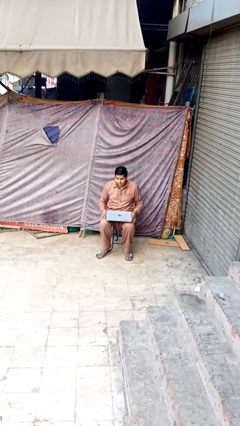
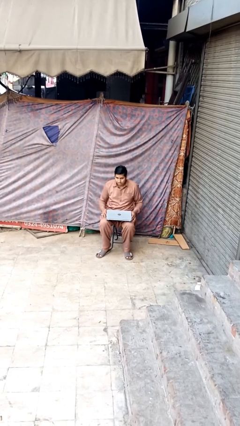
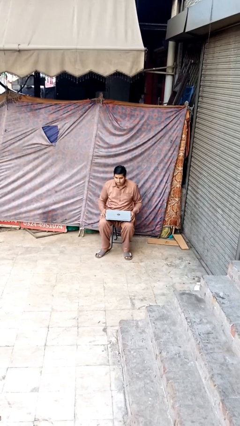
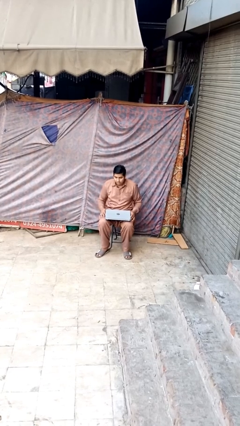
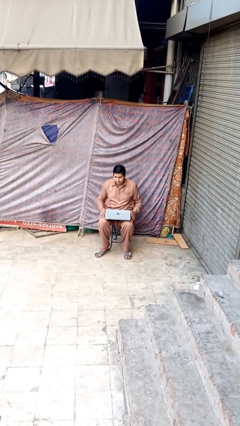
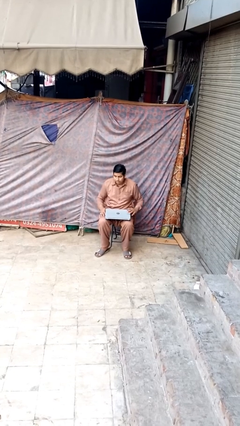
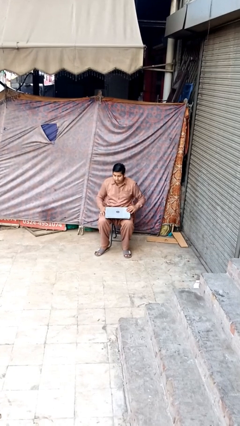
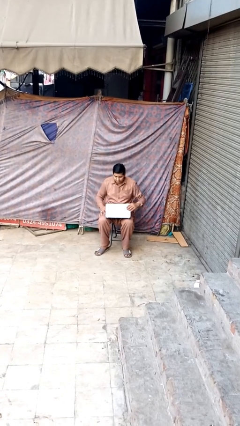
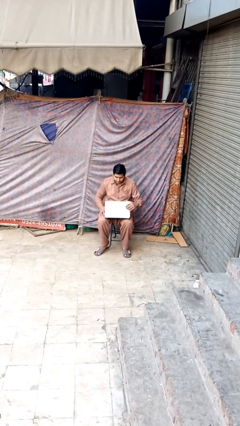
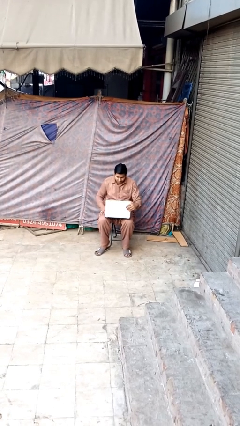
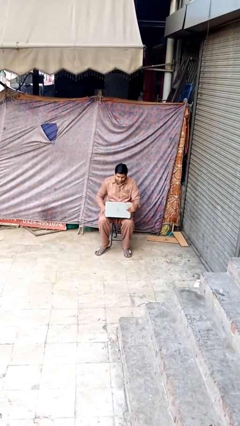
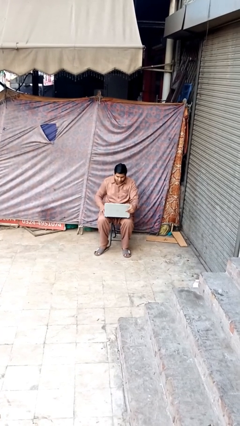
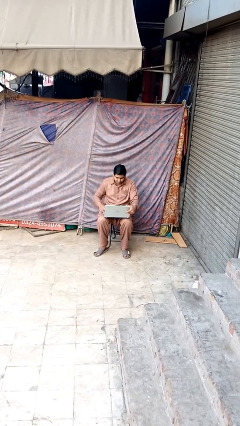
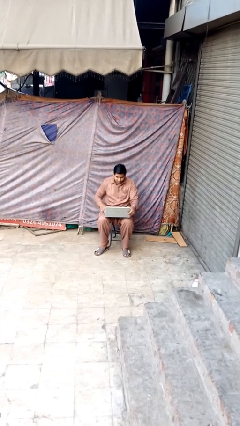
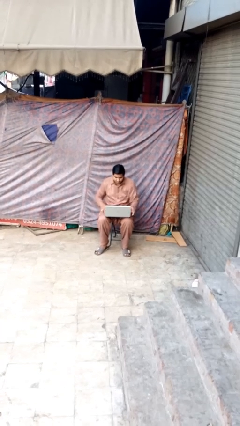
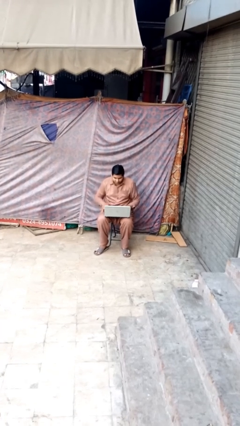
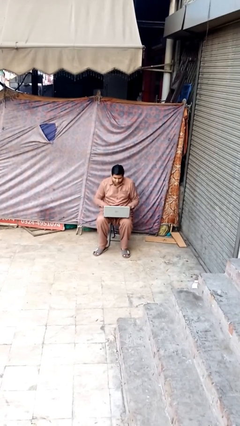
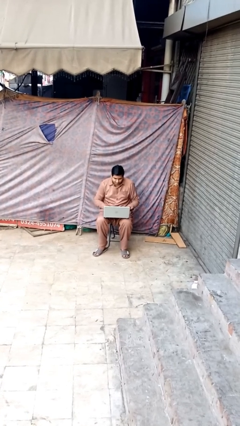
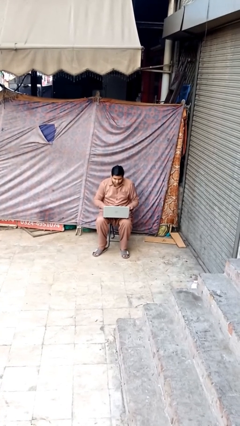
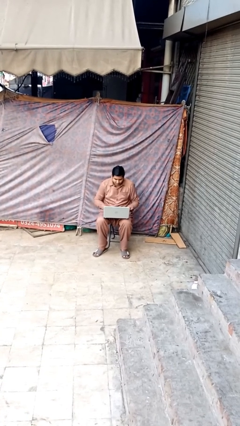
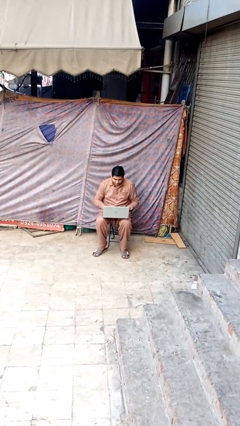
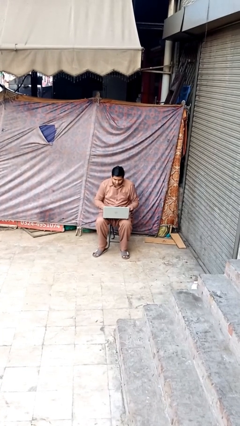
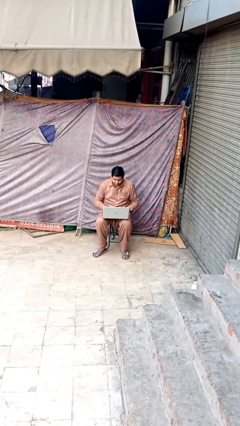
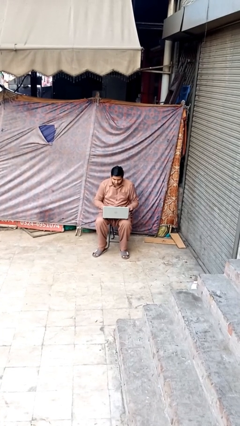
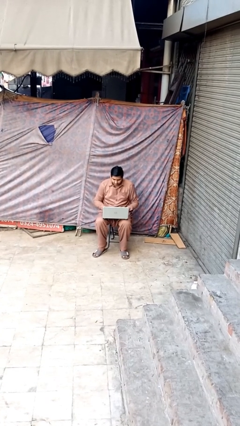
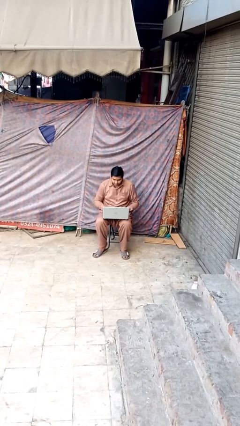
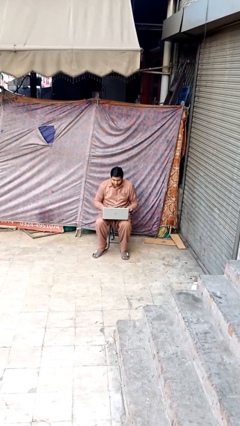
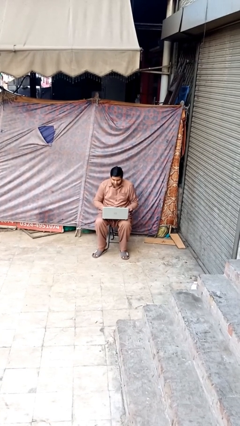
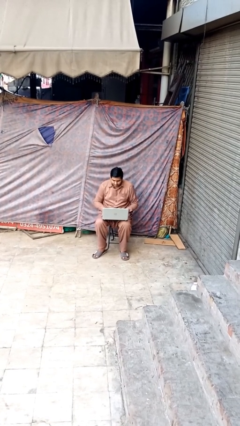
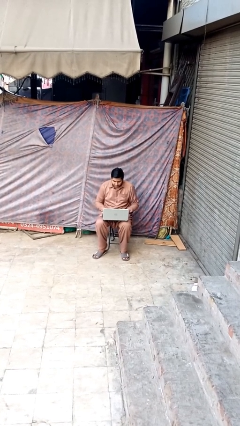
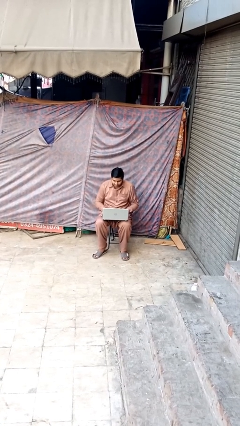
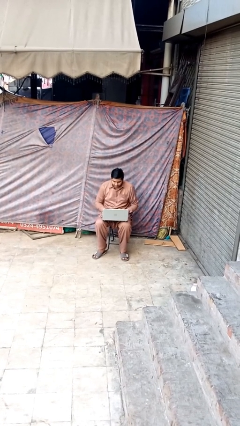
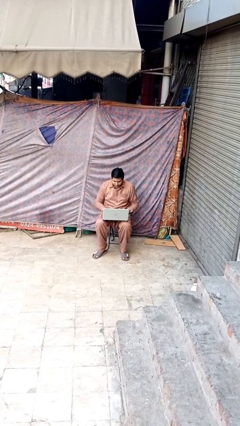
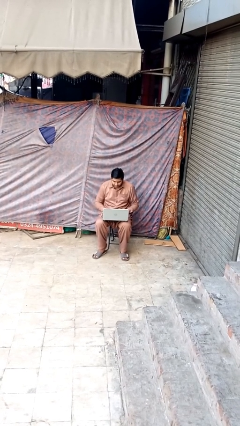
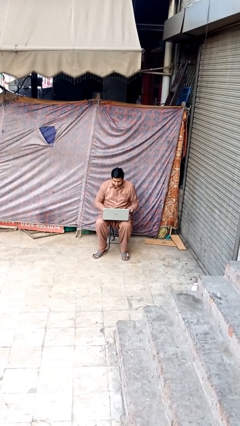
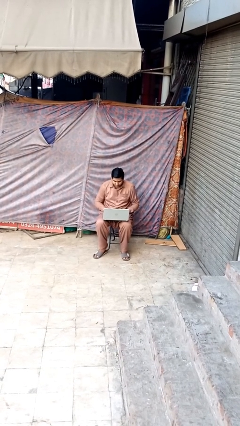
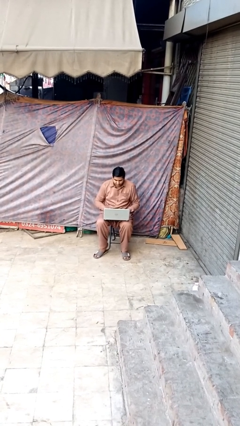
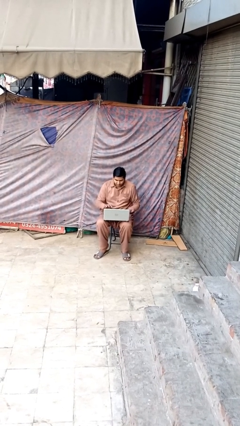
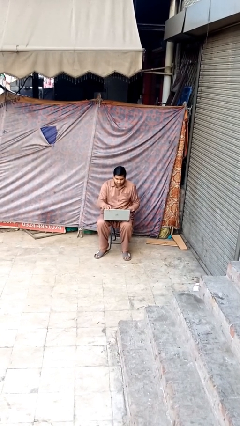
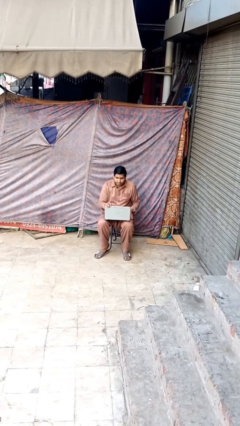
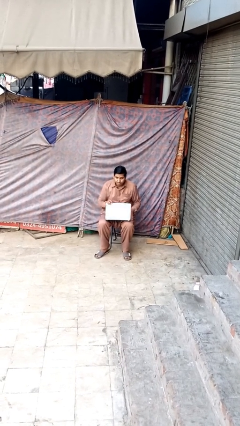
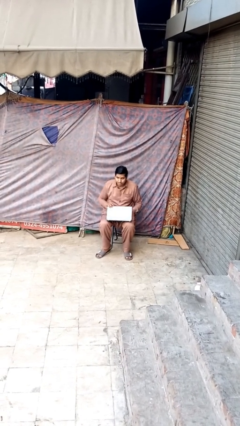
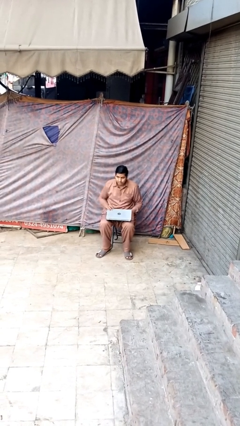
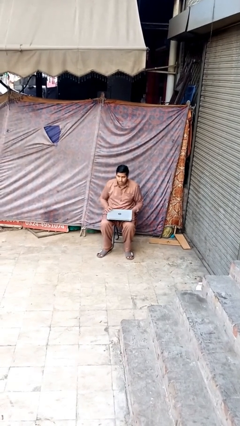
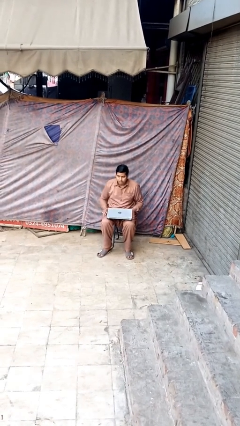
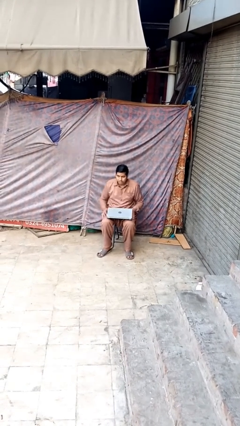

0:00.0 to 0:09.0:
person interacts with laptop

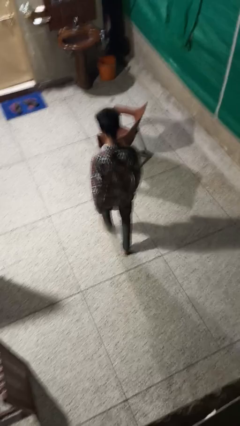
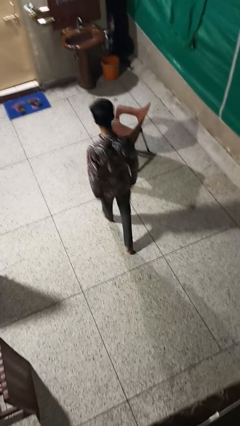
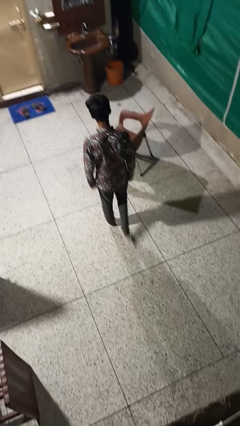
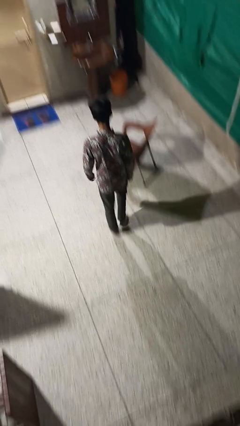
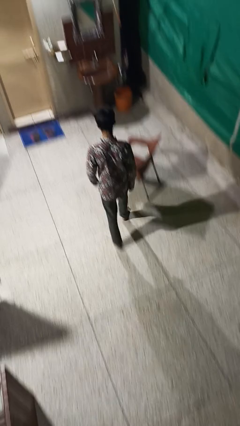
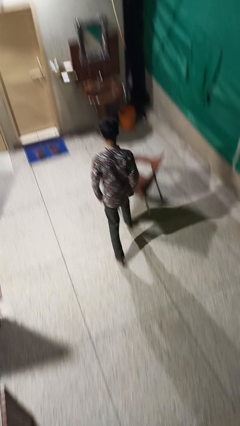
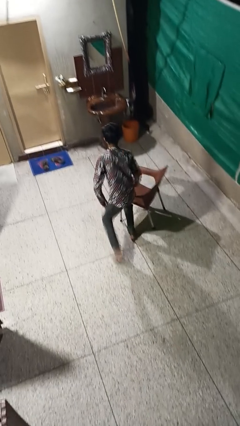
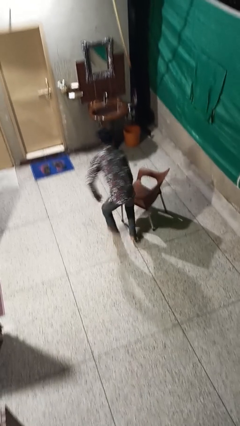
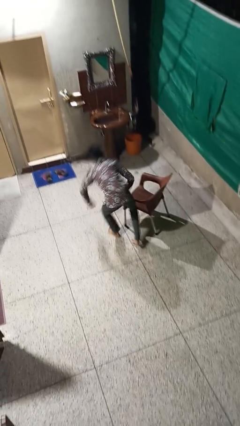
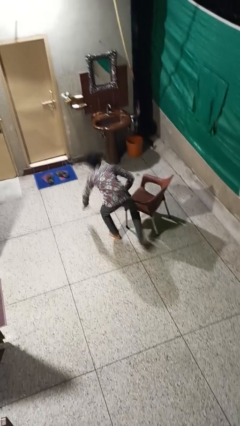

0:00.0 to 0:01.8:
person trips on object on floor

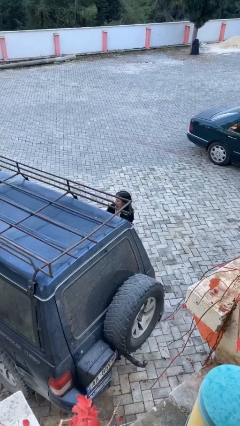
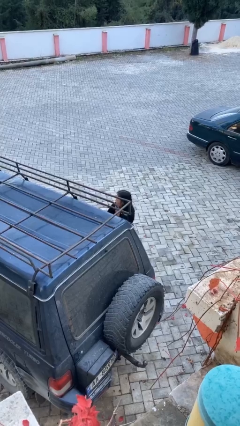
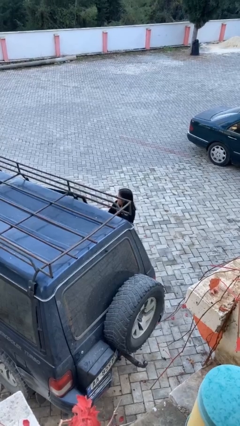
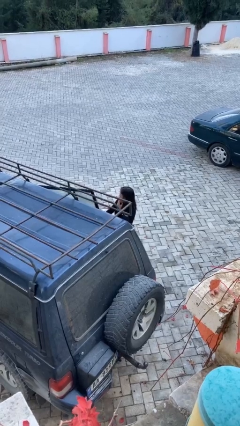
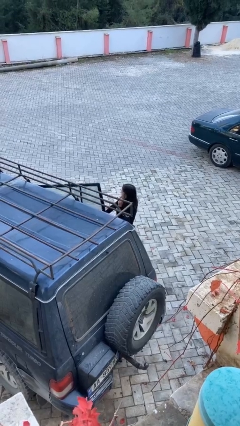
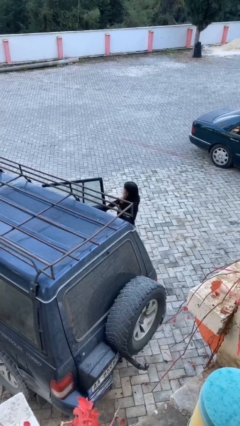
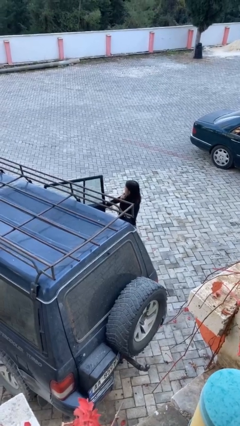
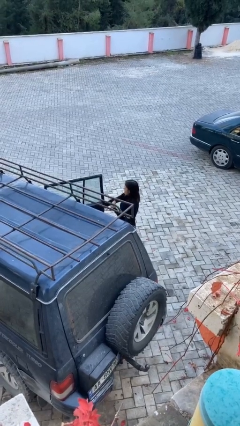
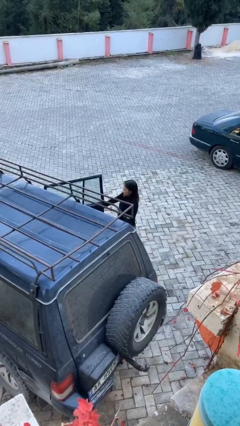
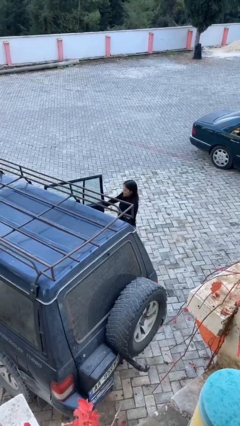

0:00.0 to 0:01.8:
person opens car door

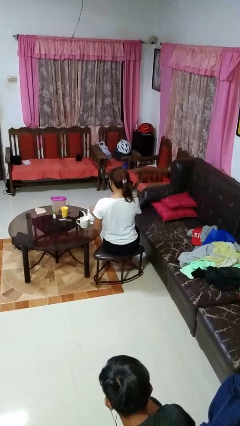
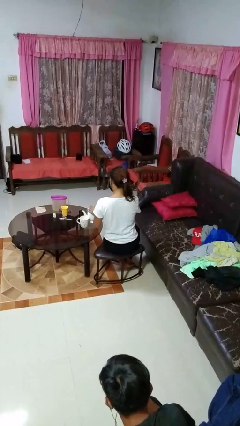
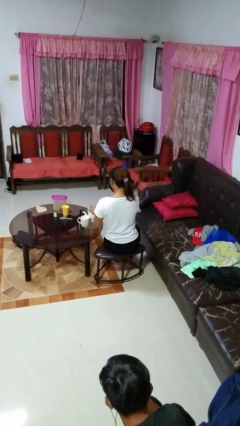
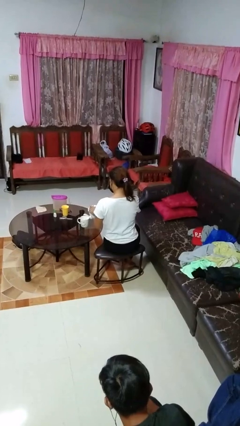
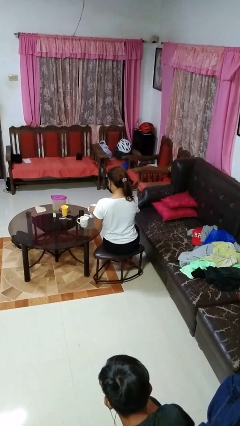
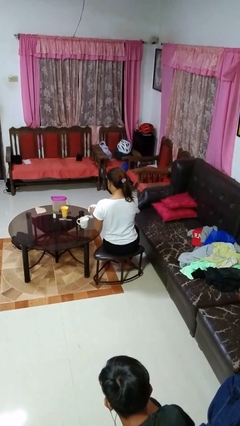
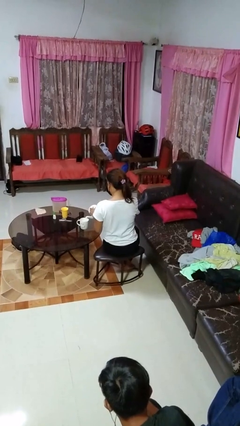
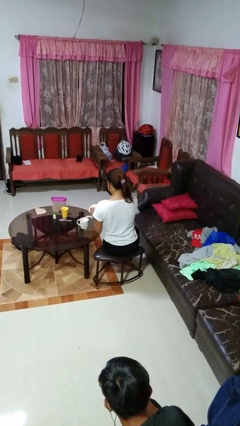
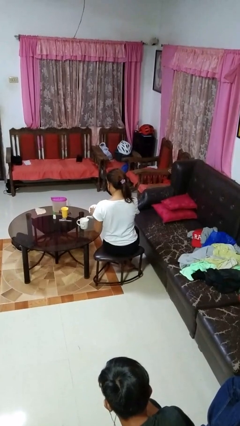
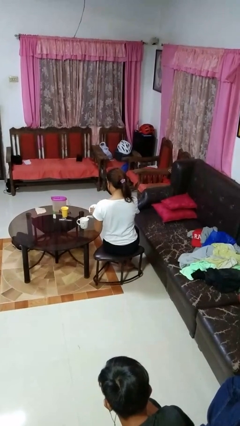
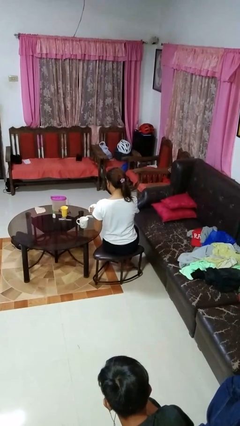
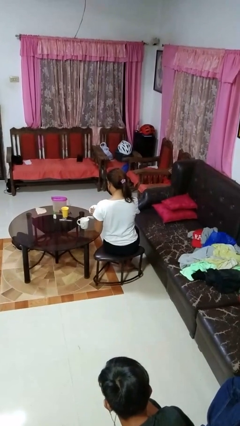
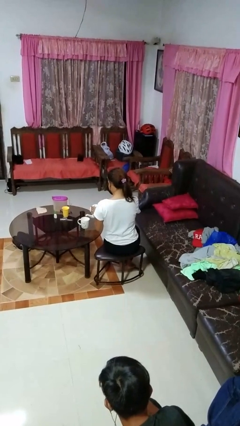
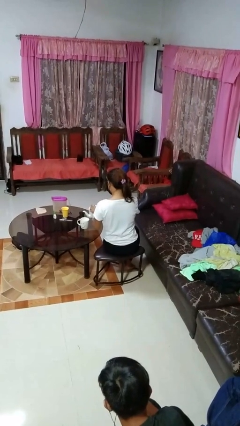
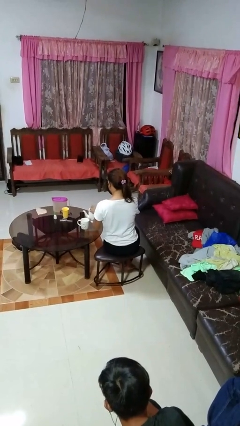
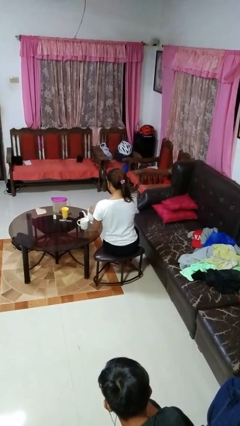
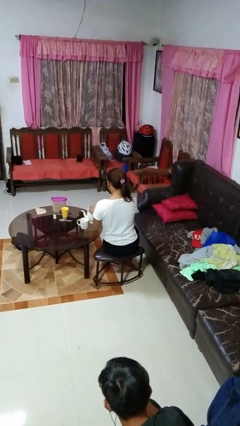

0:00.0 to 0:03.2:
person pours coffee into mug

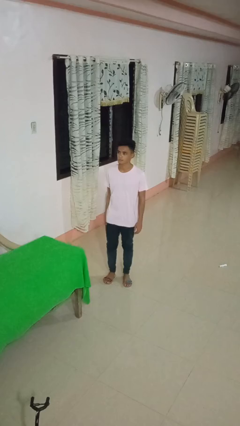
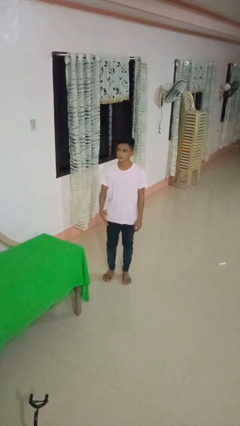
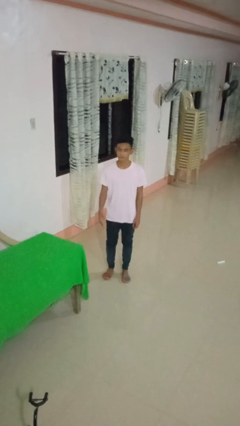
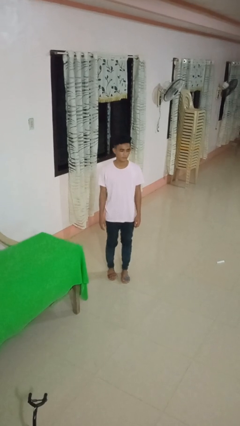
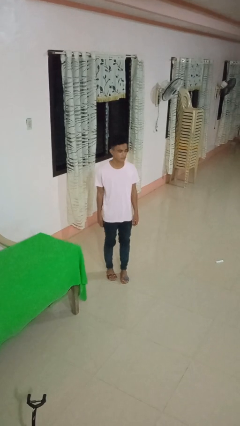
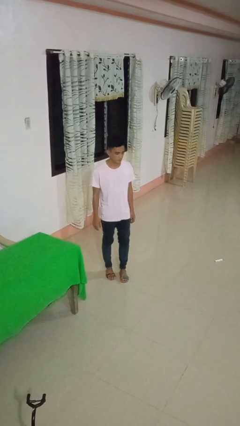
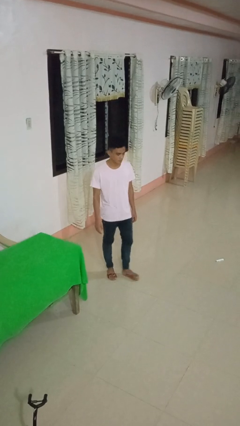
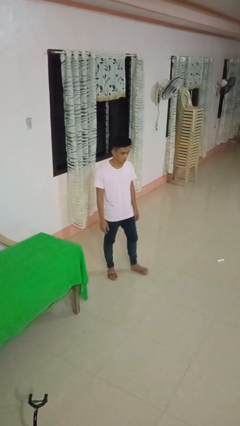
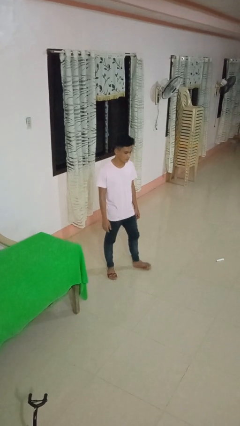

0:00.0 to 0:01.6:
person slaps hands on thighs
